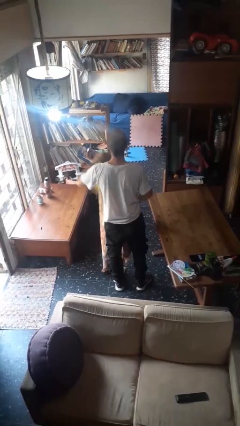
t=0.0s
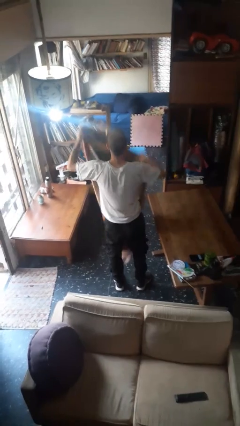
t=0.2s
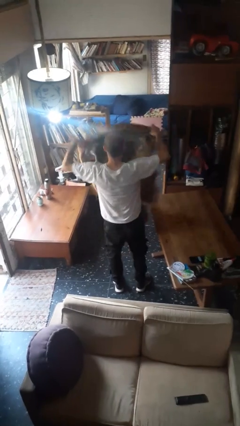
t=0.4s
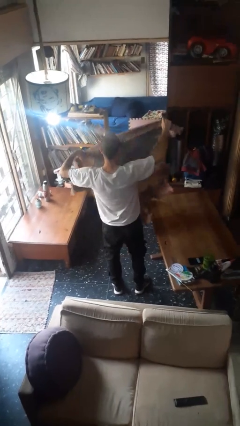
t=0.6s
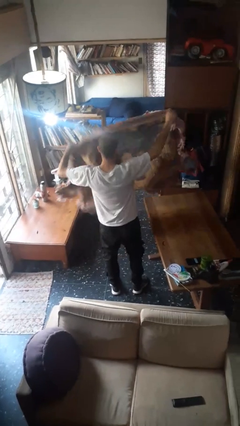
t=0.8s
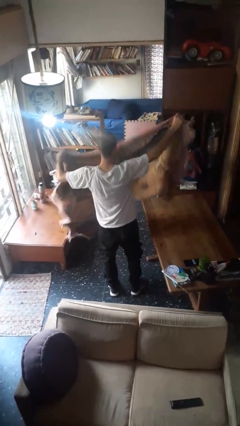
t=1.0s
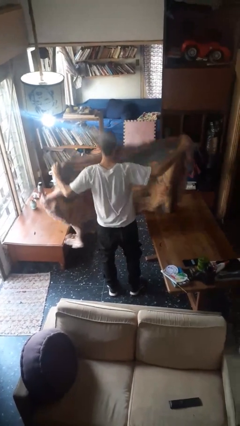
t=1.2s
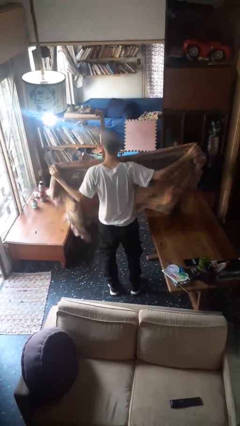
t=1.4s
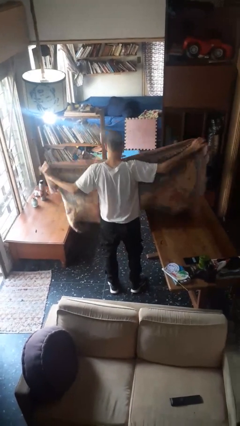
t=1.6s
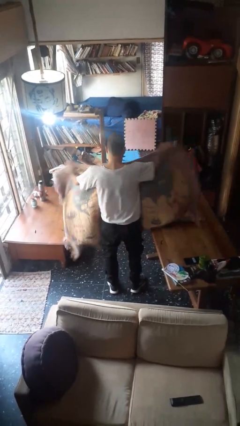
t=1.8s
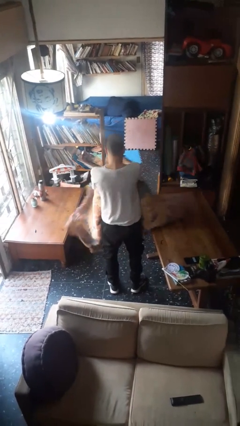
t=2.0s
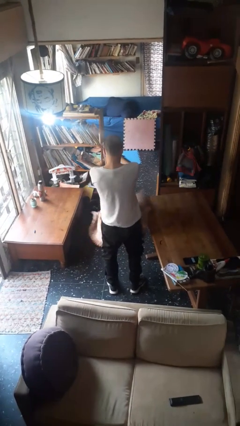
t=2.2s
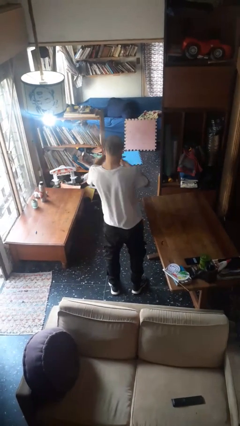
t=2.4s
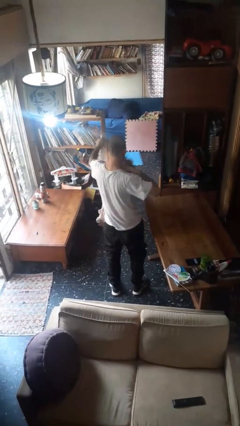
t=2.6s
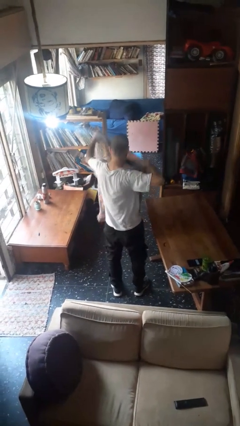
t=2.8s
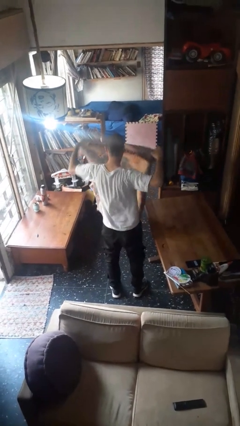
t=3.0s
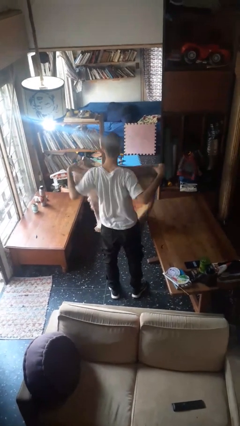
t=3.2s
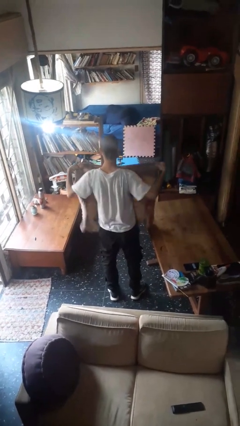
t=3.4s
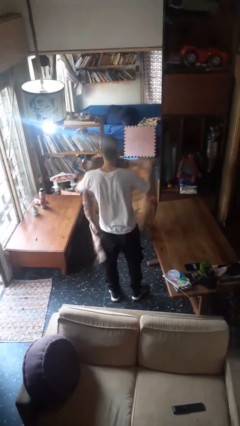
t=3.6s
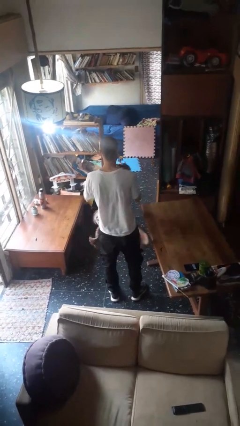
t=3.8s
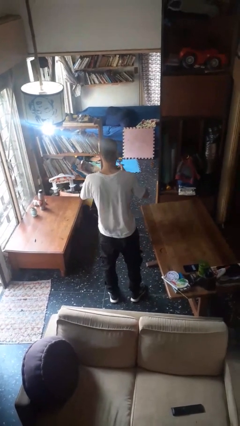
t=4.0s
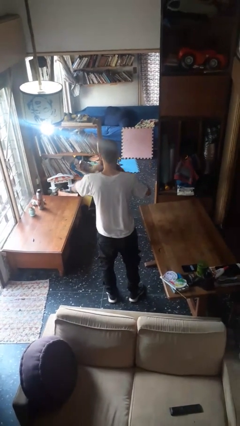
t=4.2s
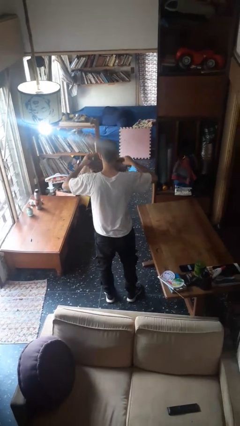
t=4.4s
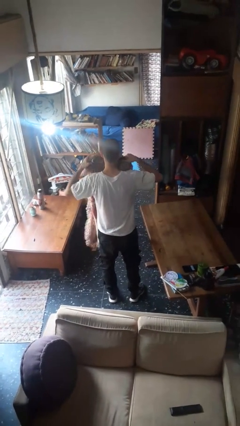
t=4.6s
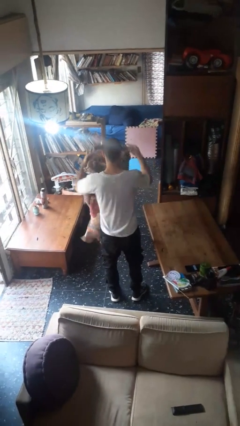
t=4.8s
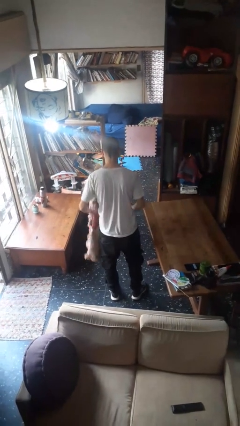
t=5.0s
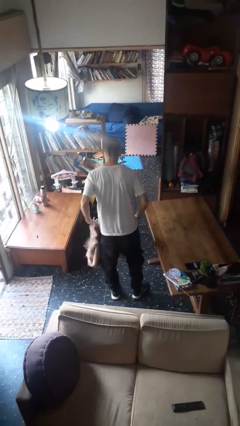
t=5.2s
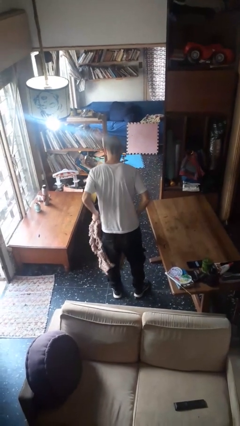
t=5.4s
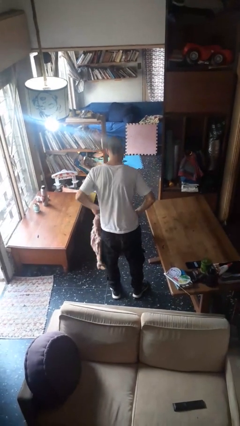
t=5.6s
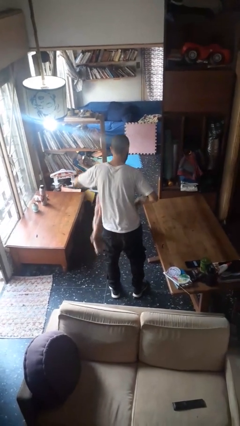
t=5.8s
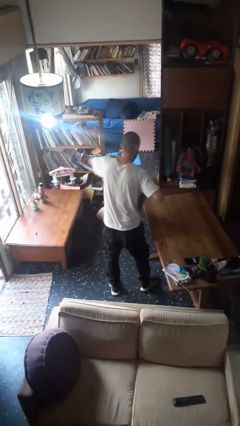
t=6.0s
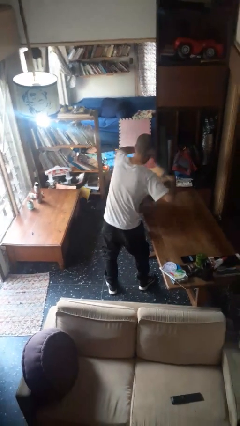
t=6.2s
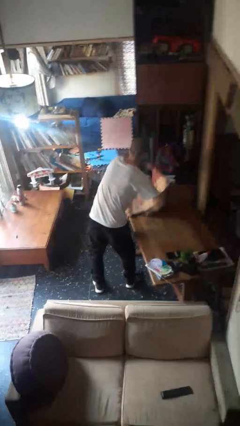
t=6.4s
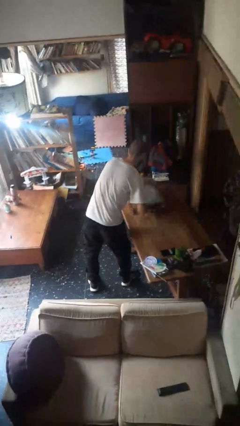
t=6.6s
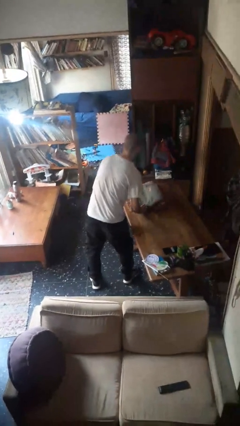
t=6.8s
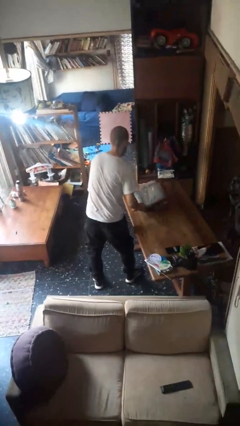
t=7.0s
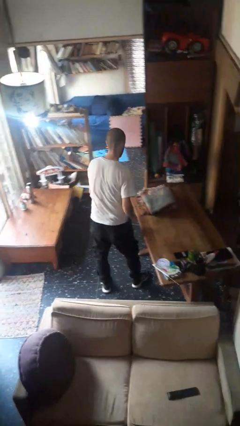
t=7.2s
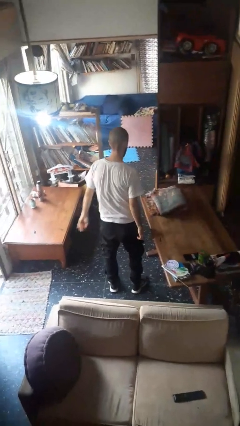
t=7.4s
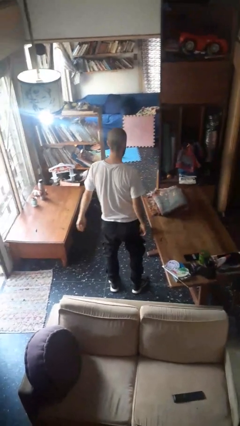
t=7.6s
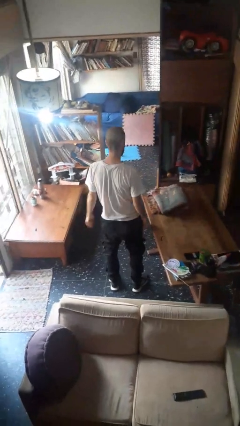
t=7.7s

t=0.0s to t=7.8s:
person folds blanket

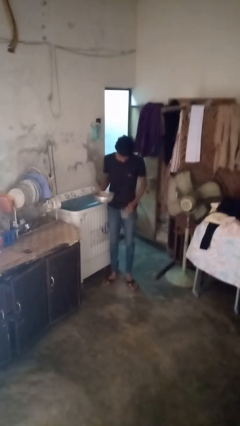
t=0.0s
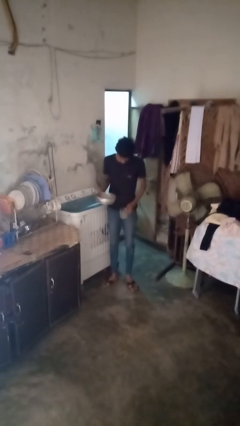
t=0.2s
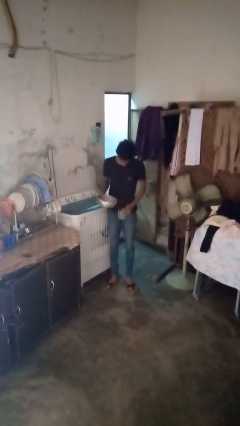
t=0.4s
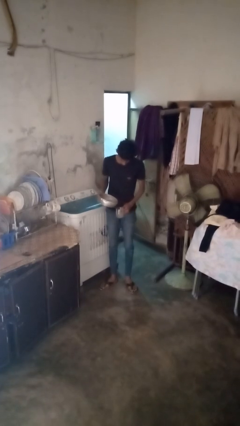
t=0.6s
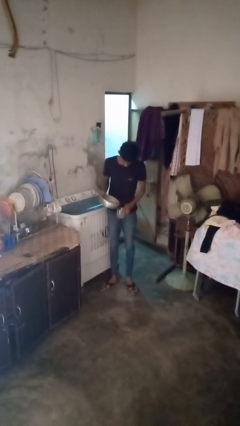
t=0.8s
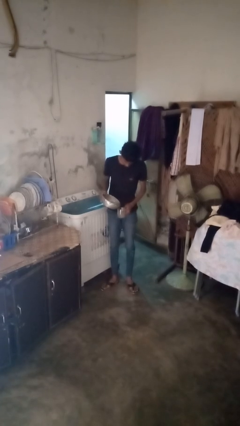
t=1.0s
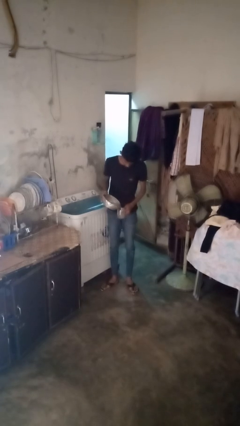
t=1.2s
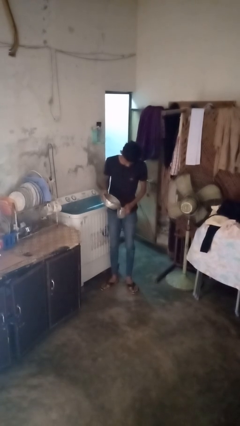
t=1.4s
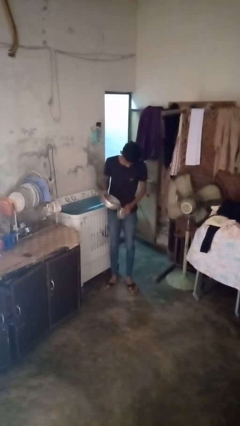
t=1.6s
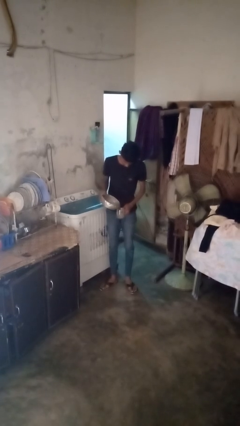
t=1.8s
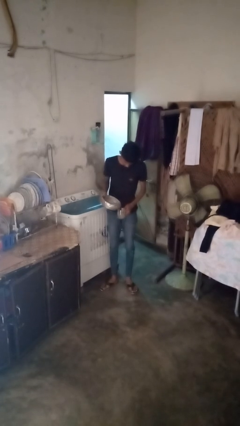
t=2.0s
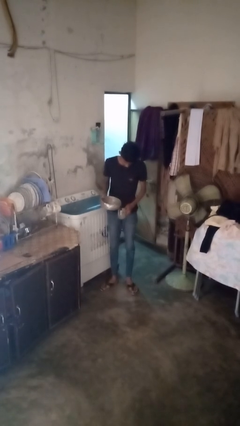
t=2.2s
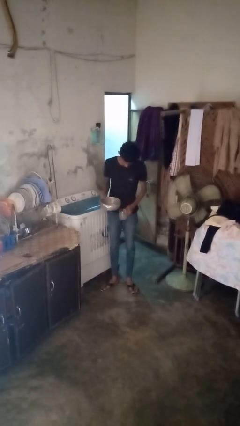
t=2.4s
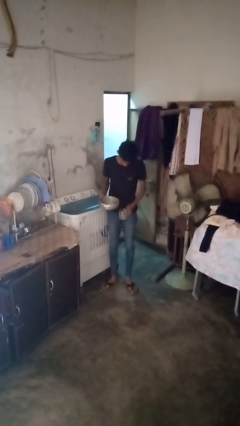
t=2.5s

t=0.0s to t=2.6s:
person pours liquid into cup

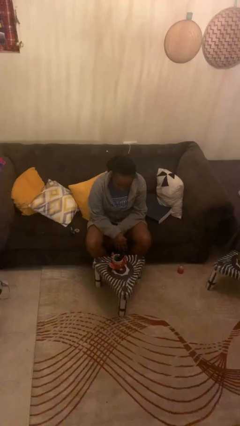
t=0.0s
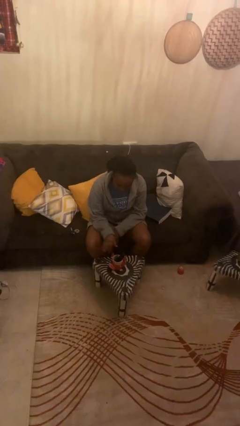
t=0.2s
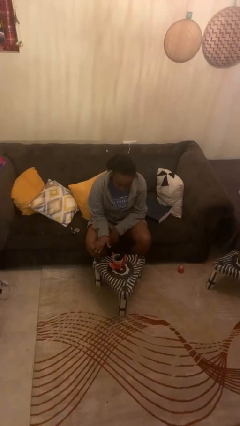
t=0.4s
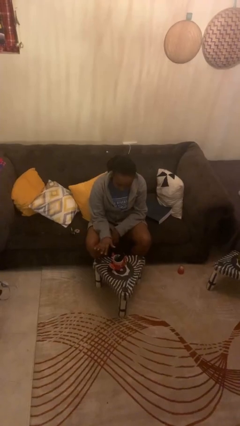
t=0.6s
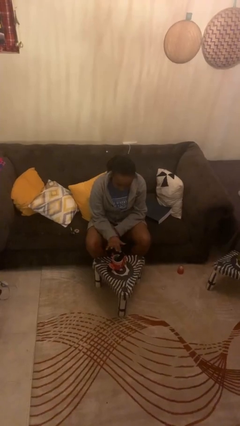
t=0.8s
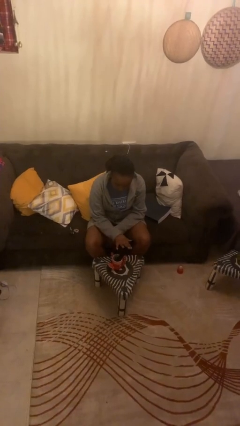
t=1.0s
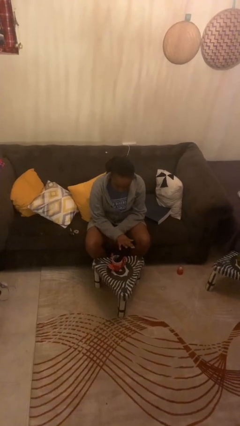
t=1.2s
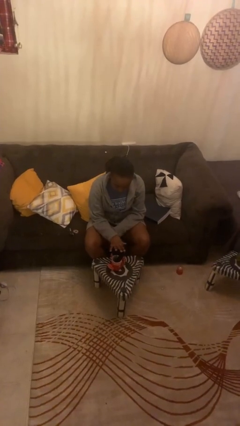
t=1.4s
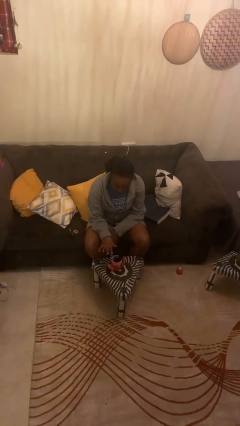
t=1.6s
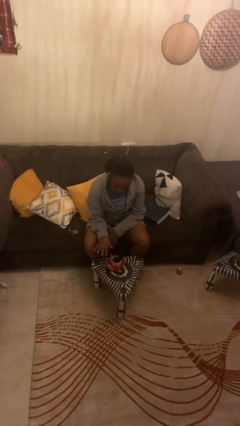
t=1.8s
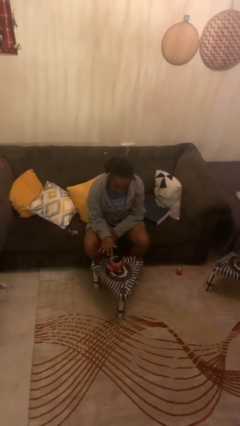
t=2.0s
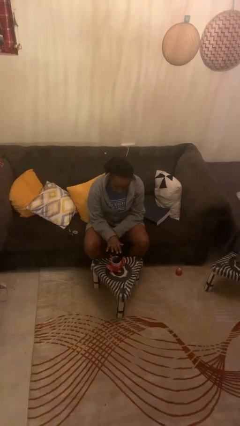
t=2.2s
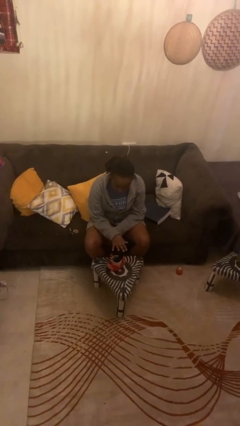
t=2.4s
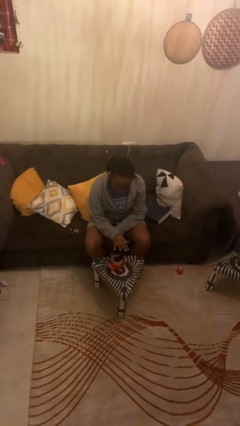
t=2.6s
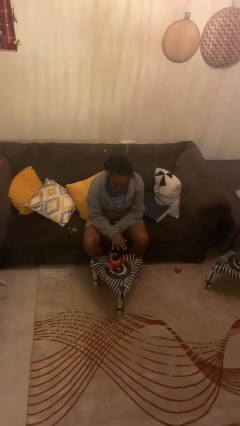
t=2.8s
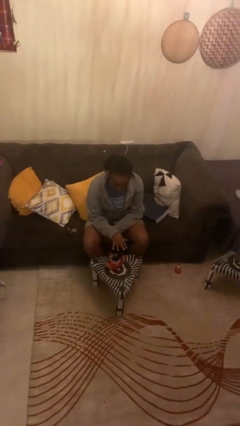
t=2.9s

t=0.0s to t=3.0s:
person waves hand over object

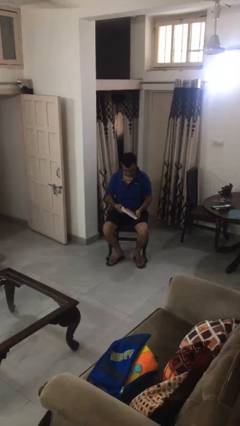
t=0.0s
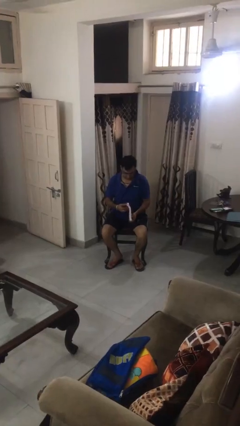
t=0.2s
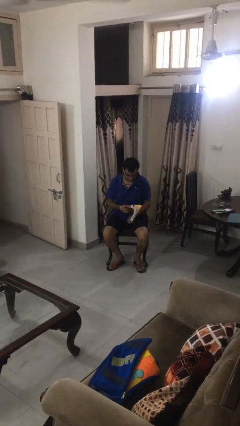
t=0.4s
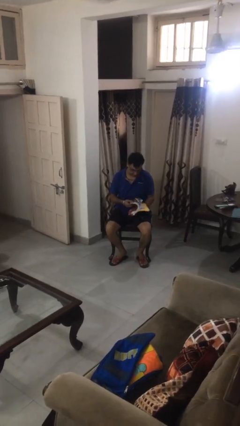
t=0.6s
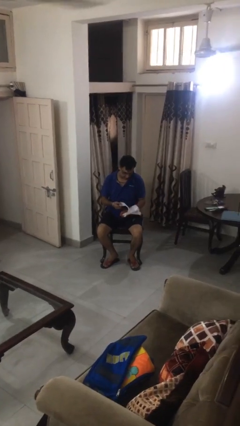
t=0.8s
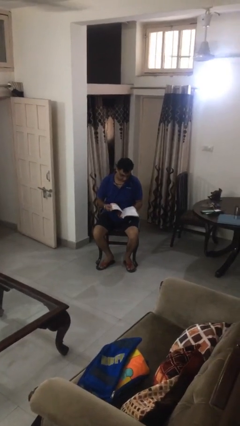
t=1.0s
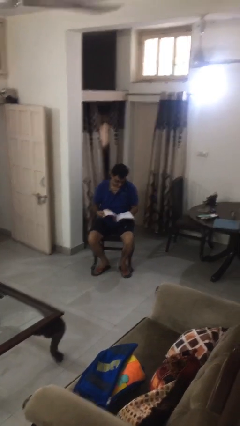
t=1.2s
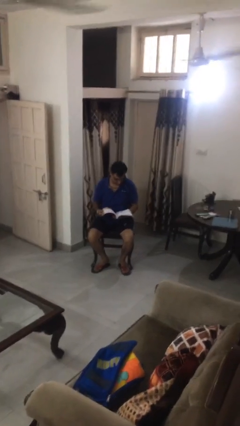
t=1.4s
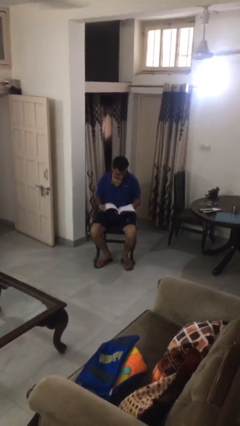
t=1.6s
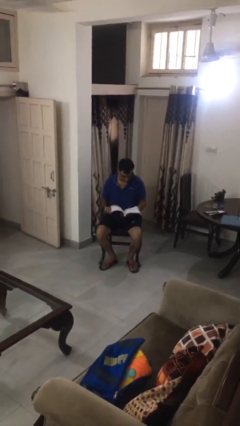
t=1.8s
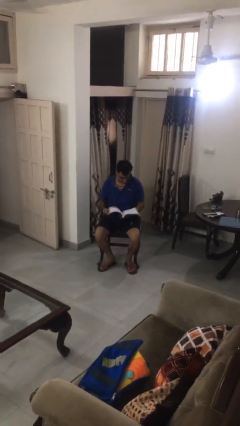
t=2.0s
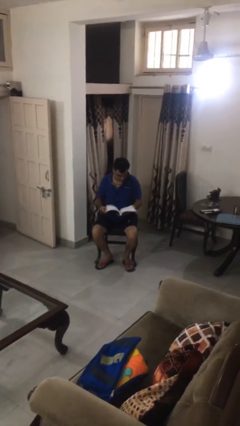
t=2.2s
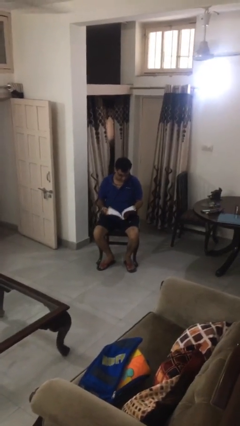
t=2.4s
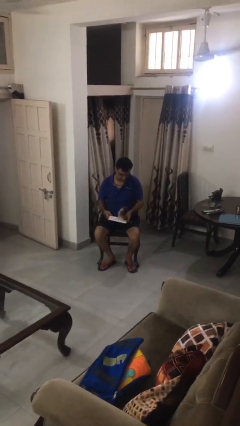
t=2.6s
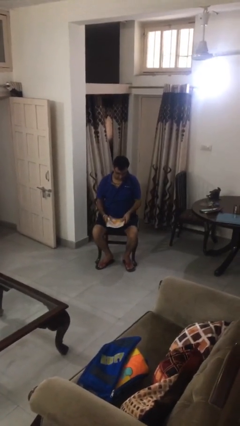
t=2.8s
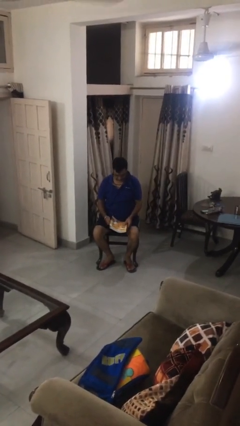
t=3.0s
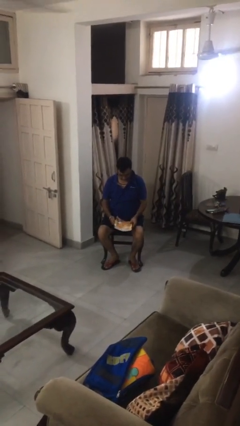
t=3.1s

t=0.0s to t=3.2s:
person reads book

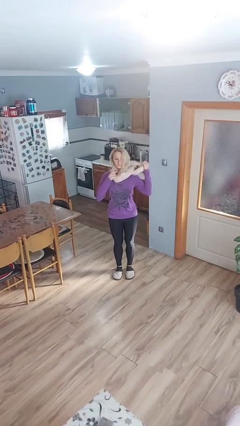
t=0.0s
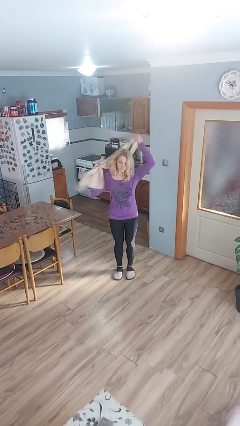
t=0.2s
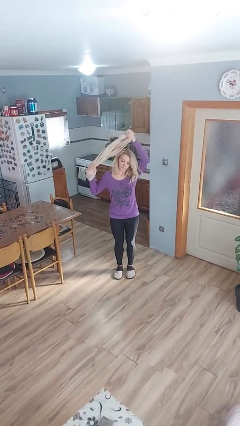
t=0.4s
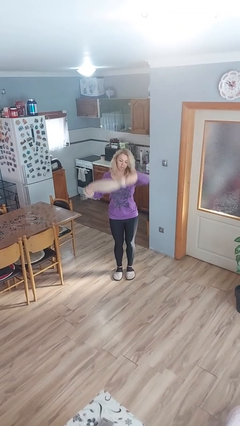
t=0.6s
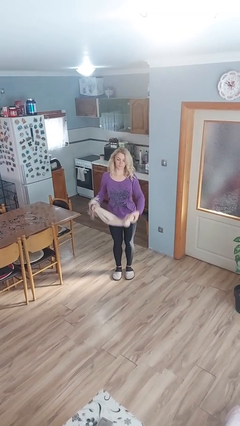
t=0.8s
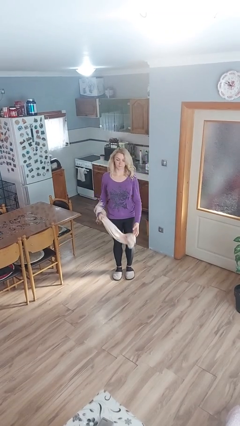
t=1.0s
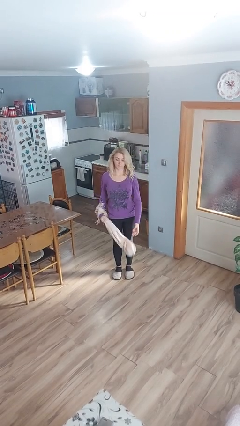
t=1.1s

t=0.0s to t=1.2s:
person takes off scarf
